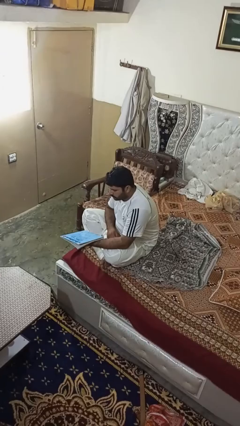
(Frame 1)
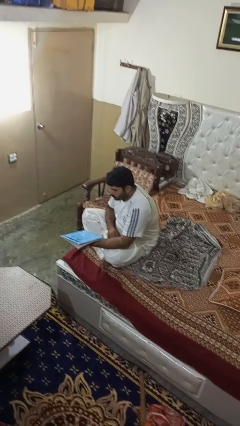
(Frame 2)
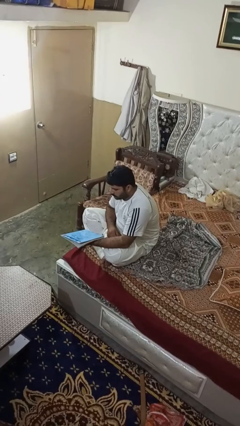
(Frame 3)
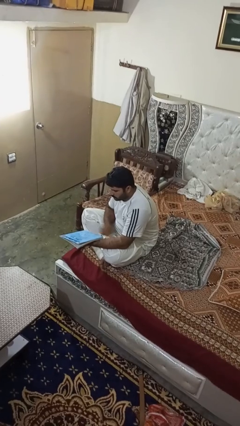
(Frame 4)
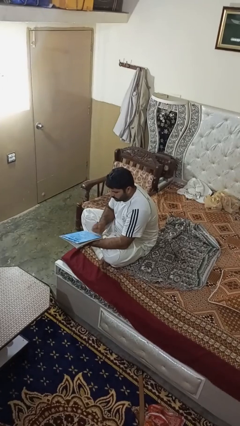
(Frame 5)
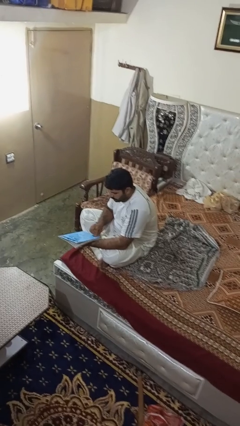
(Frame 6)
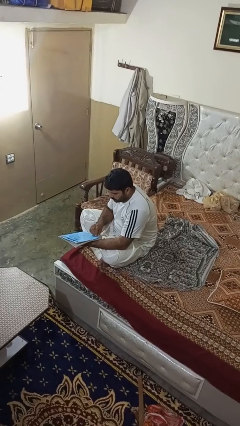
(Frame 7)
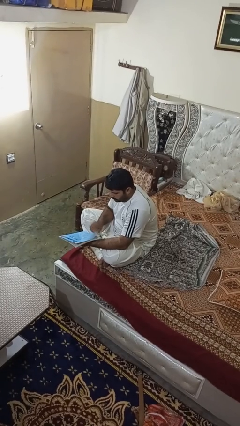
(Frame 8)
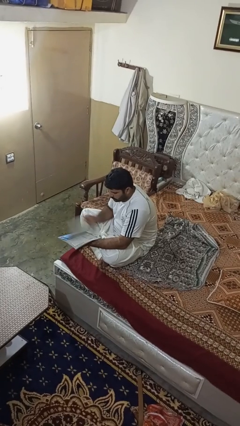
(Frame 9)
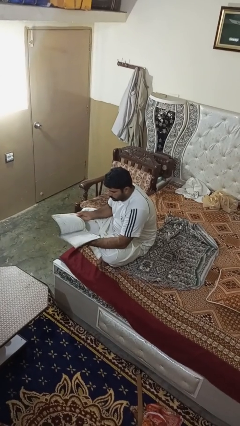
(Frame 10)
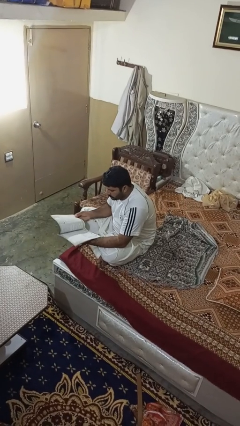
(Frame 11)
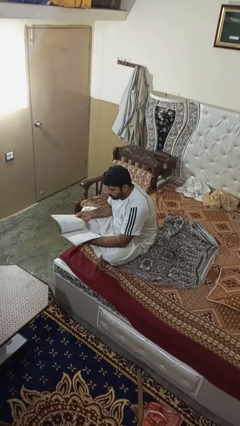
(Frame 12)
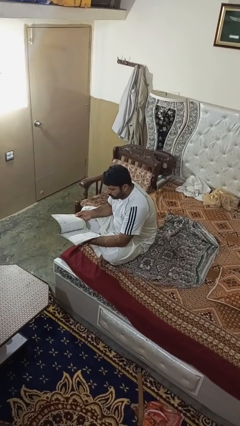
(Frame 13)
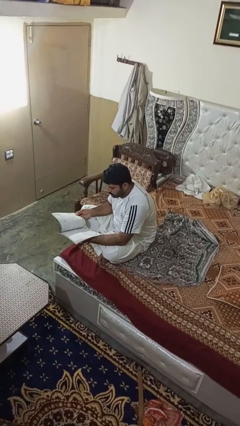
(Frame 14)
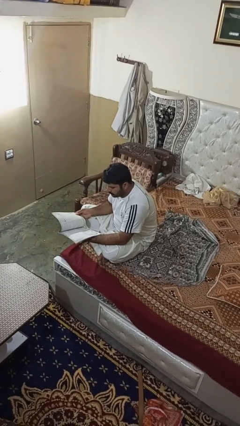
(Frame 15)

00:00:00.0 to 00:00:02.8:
person reads magazine

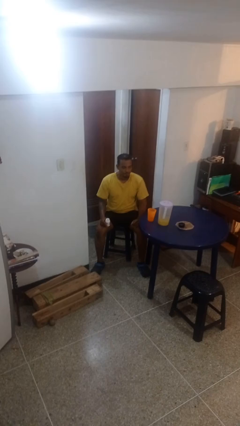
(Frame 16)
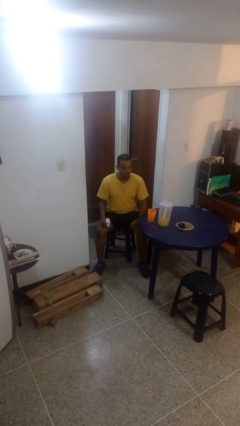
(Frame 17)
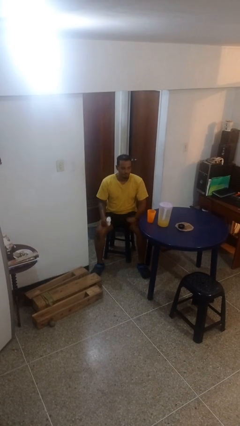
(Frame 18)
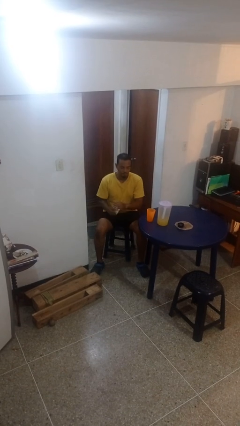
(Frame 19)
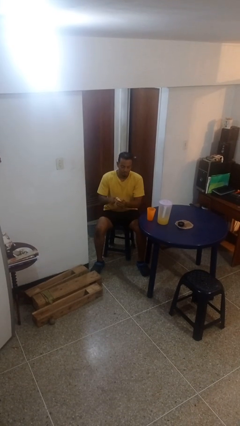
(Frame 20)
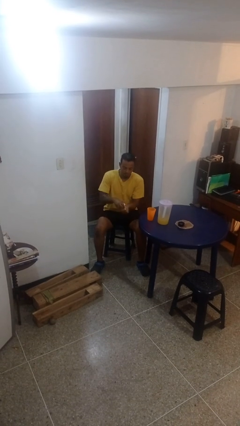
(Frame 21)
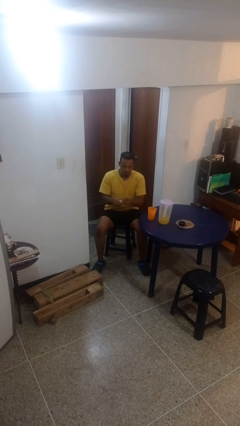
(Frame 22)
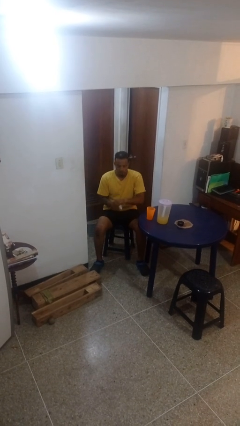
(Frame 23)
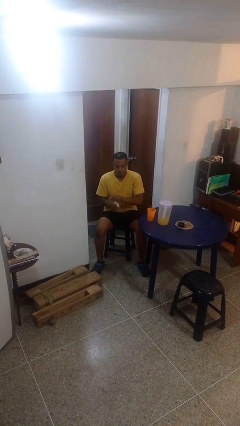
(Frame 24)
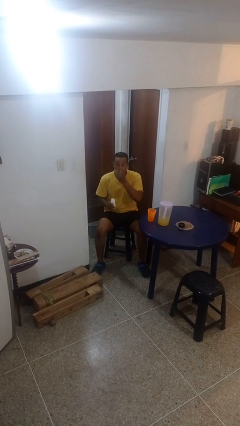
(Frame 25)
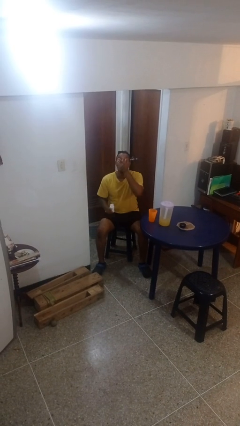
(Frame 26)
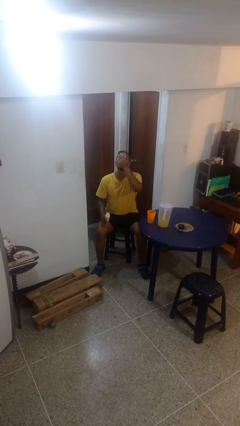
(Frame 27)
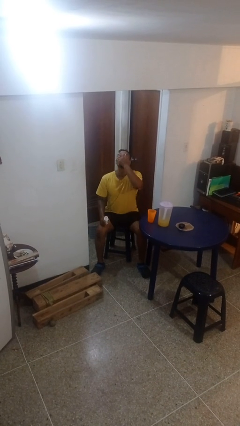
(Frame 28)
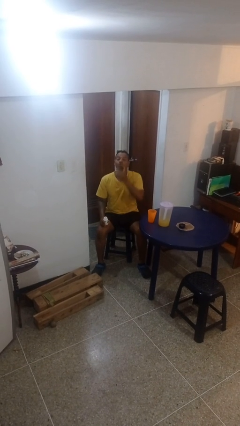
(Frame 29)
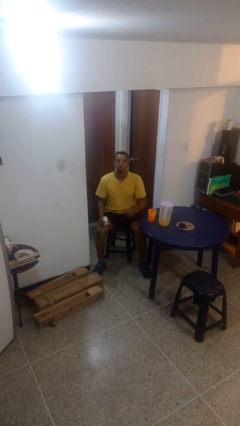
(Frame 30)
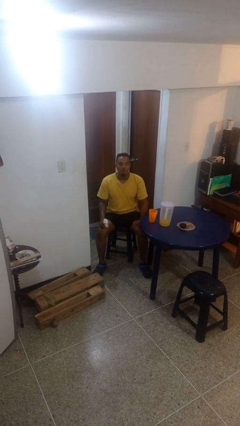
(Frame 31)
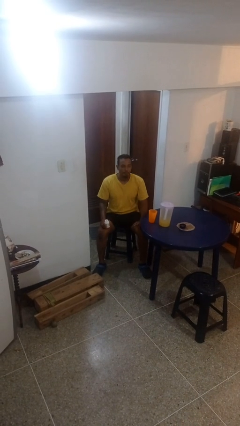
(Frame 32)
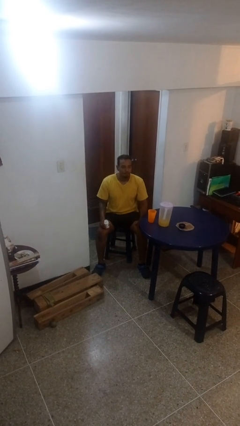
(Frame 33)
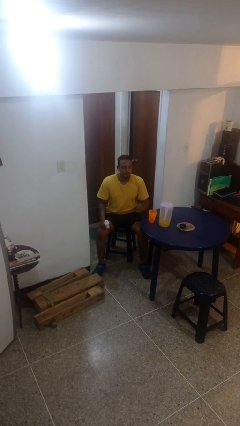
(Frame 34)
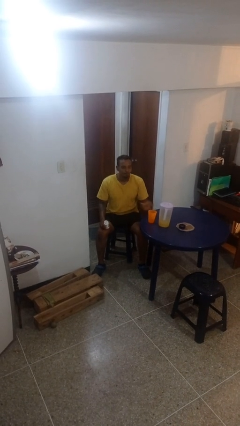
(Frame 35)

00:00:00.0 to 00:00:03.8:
person takes medicine pills

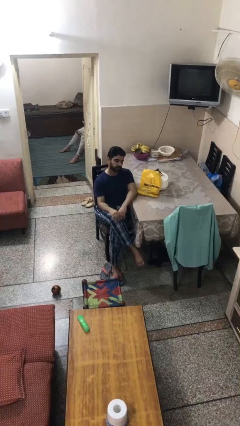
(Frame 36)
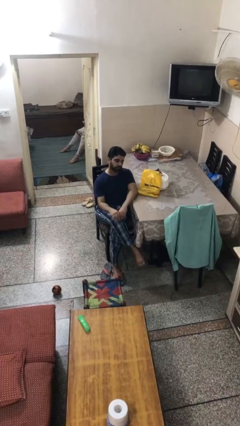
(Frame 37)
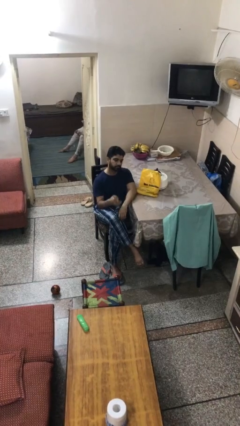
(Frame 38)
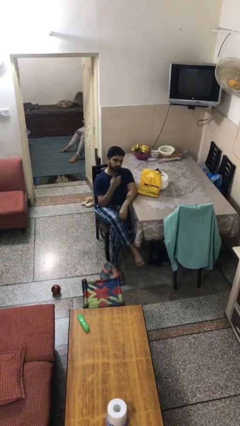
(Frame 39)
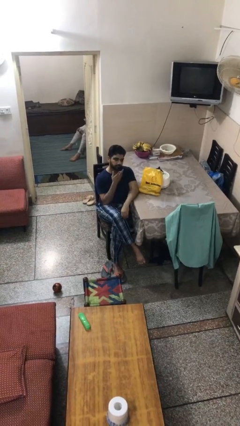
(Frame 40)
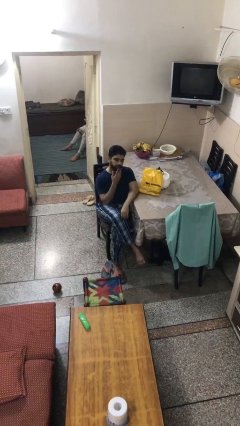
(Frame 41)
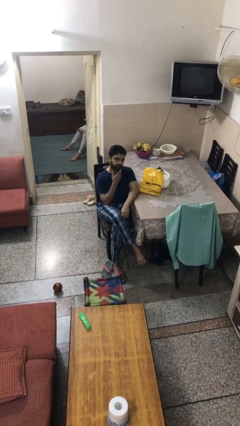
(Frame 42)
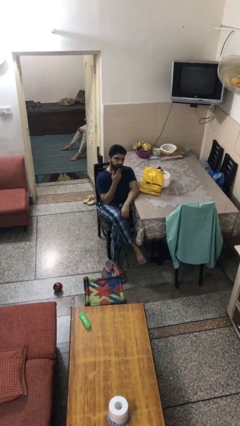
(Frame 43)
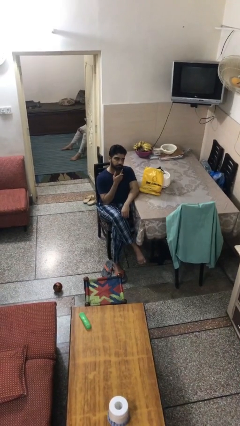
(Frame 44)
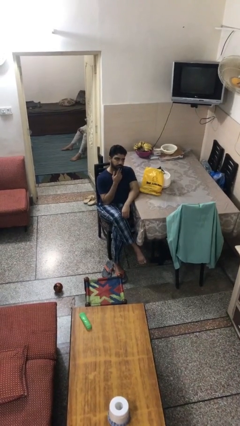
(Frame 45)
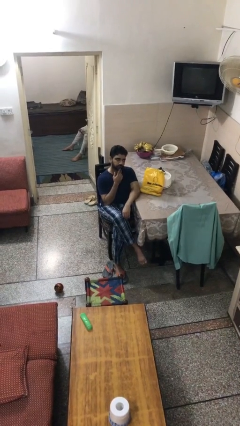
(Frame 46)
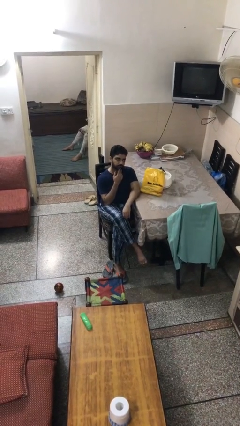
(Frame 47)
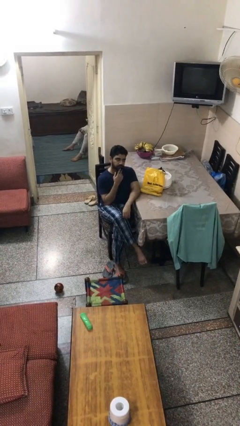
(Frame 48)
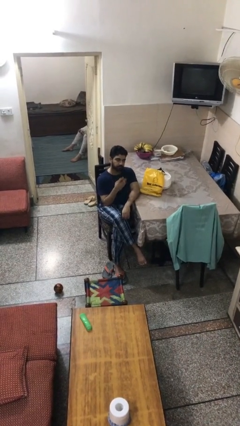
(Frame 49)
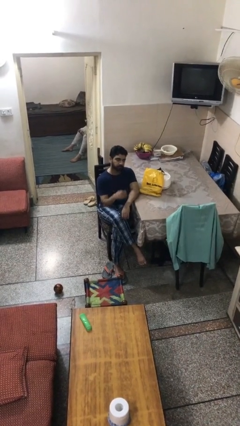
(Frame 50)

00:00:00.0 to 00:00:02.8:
person strokes chin

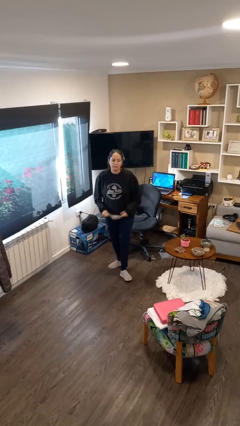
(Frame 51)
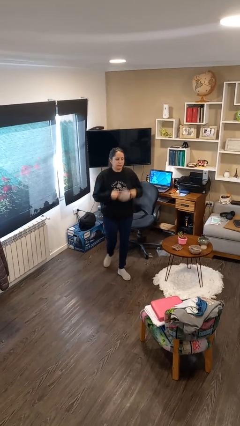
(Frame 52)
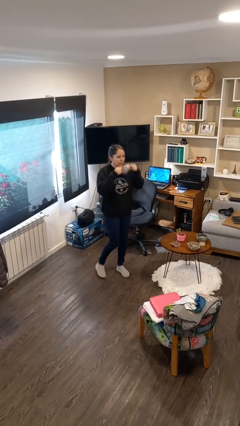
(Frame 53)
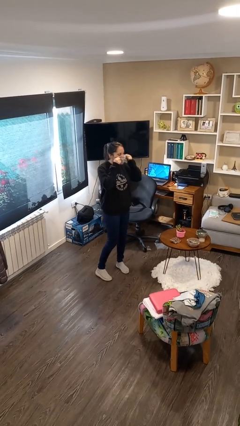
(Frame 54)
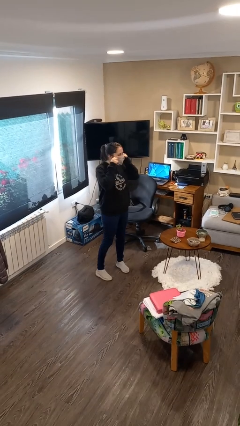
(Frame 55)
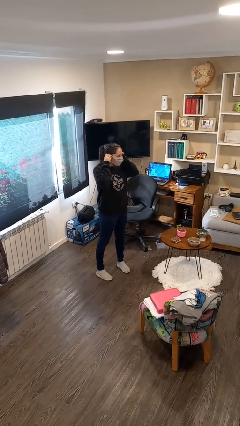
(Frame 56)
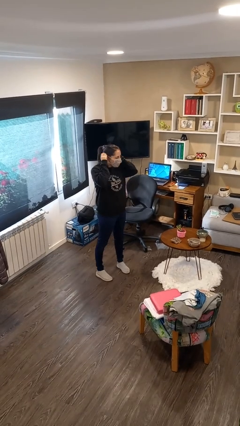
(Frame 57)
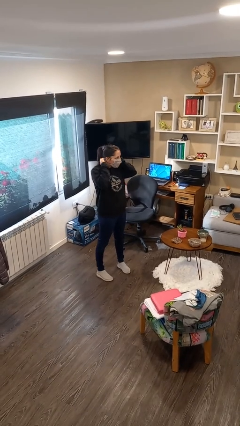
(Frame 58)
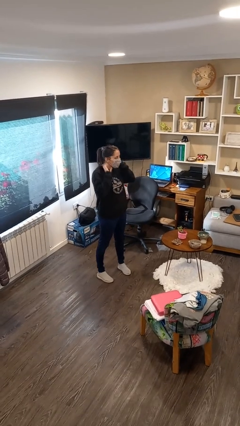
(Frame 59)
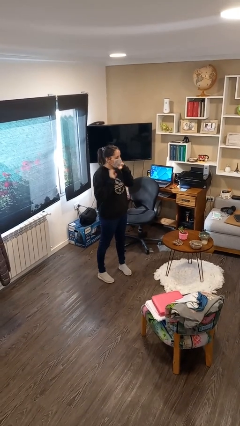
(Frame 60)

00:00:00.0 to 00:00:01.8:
person puts on facemask

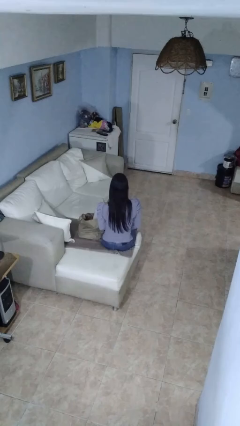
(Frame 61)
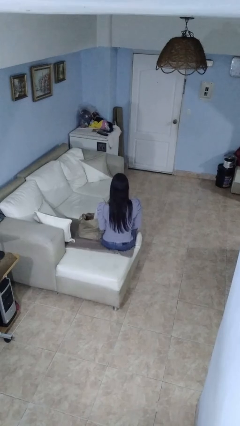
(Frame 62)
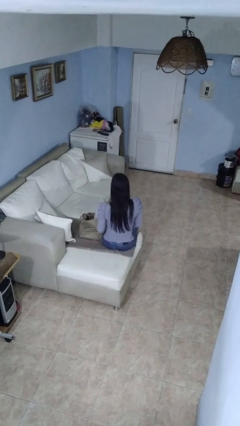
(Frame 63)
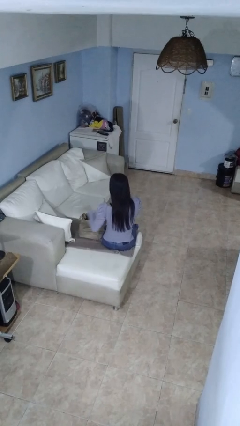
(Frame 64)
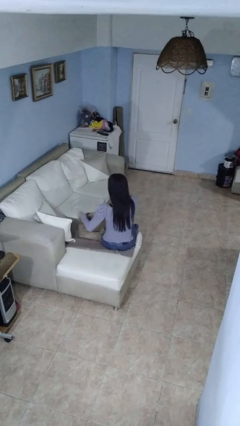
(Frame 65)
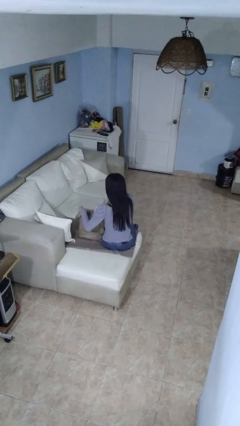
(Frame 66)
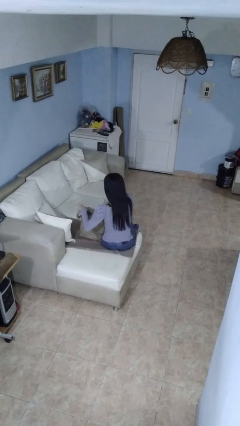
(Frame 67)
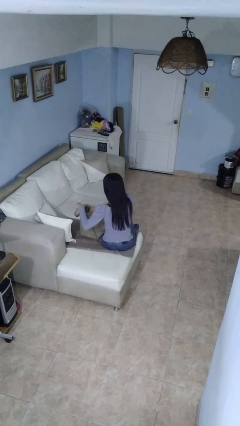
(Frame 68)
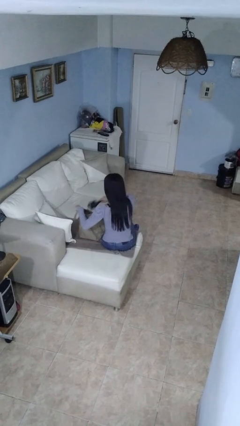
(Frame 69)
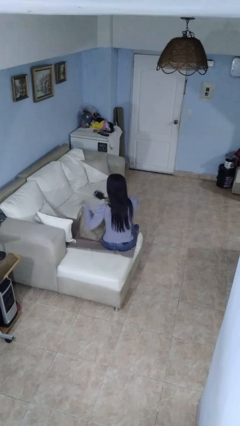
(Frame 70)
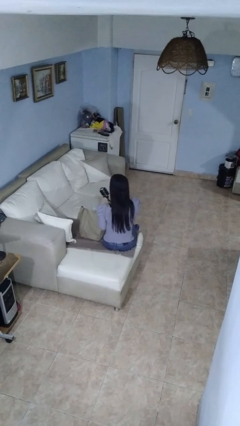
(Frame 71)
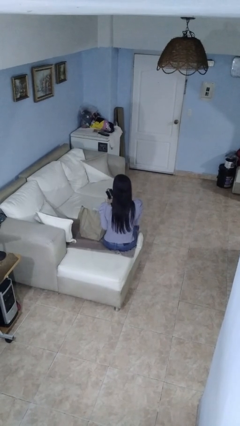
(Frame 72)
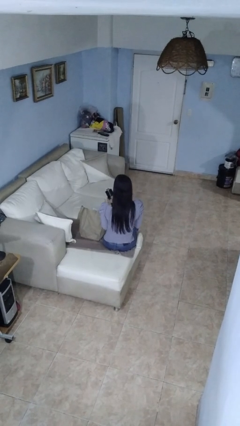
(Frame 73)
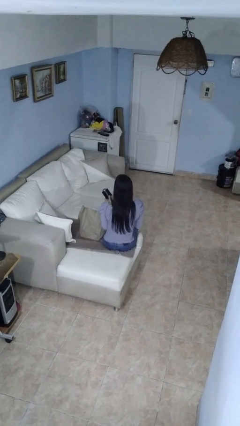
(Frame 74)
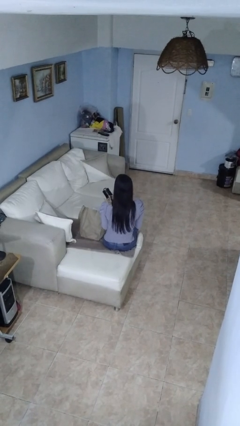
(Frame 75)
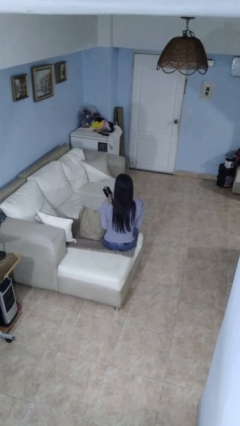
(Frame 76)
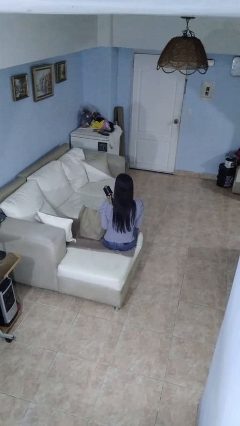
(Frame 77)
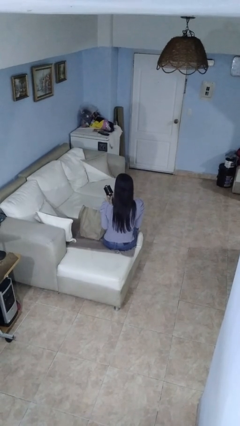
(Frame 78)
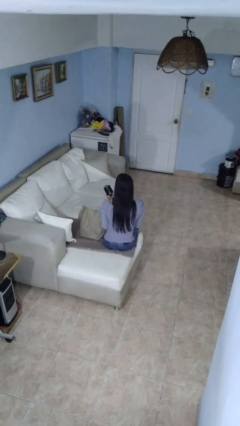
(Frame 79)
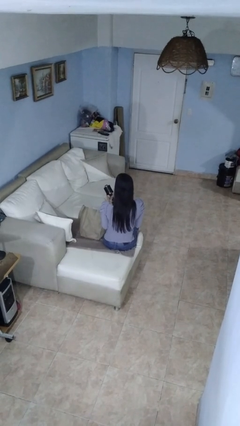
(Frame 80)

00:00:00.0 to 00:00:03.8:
person takes object from bag

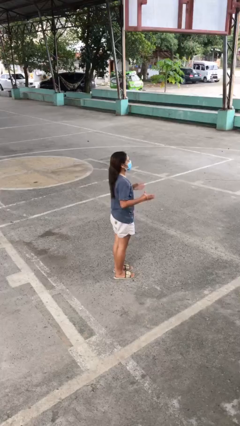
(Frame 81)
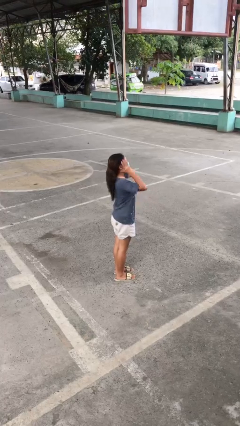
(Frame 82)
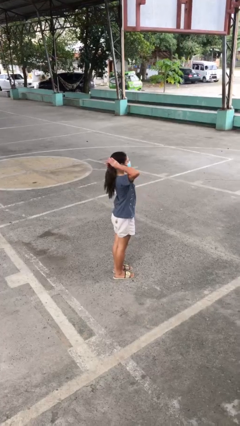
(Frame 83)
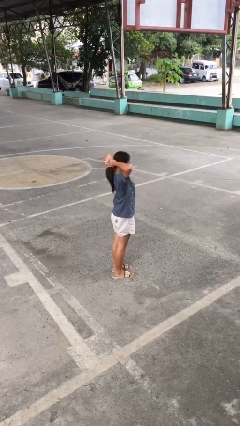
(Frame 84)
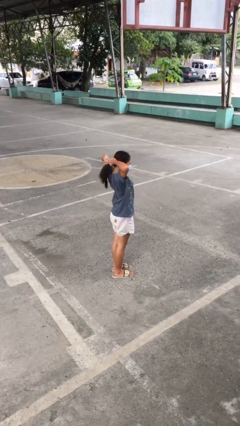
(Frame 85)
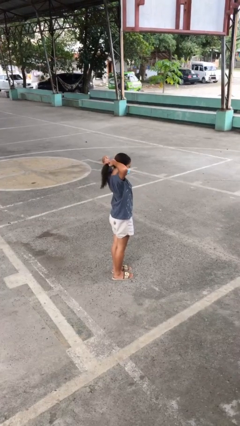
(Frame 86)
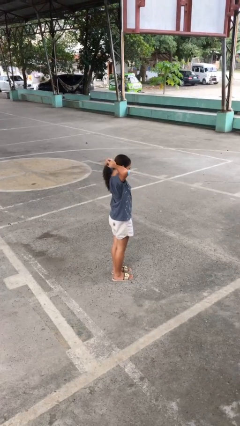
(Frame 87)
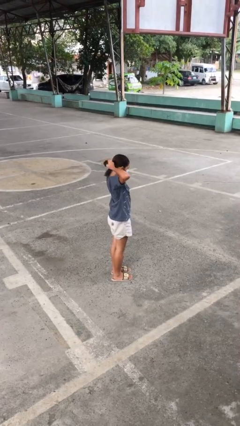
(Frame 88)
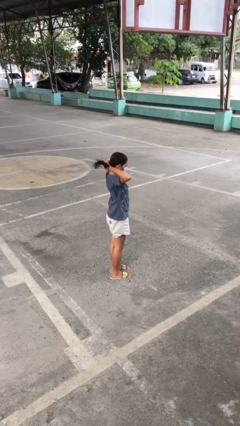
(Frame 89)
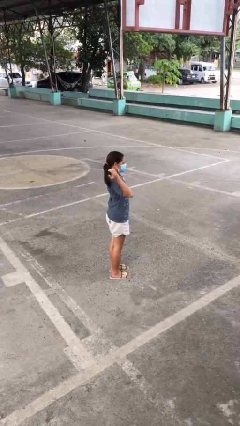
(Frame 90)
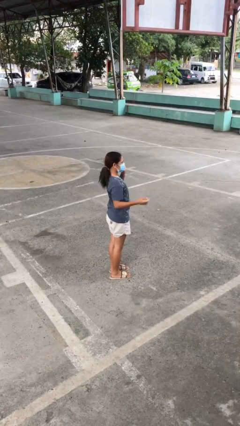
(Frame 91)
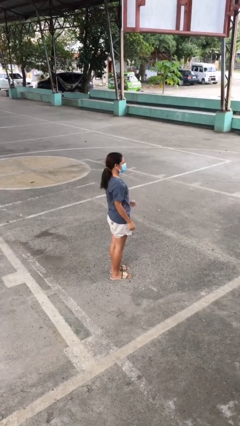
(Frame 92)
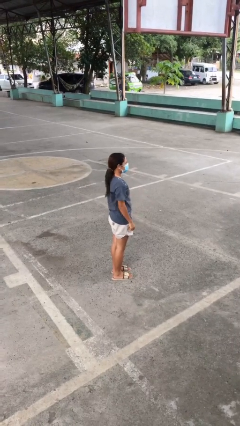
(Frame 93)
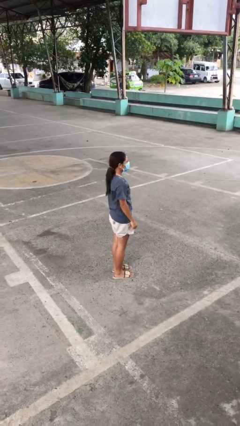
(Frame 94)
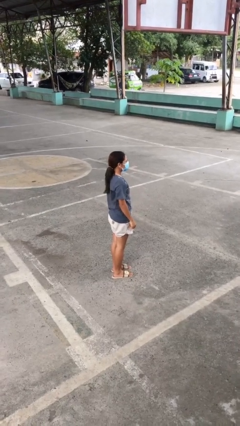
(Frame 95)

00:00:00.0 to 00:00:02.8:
person puts hair in ponytail
